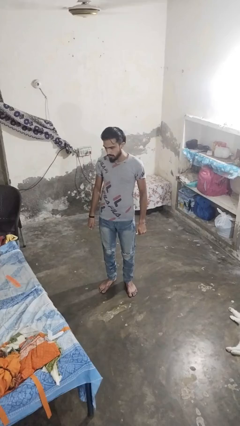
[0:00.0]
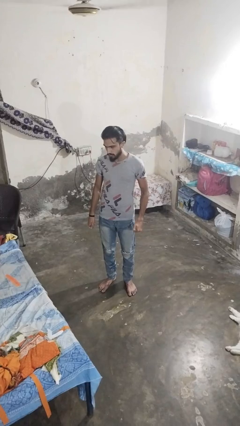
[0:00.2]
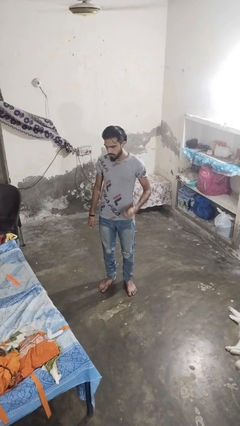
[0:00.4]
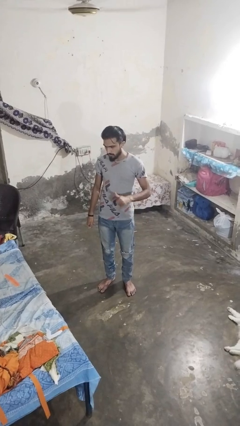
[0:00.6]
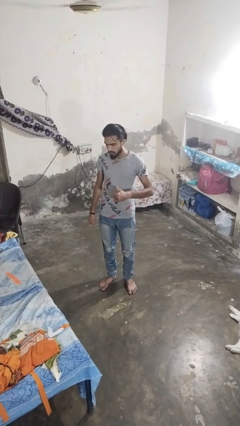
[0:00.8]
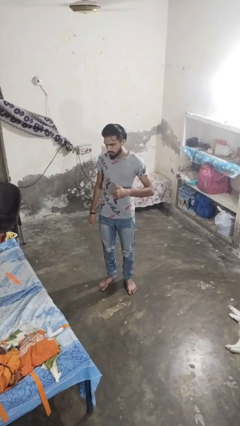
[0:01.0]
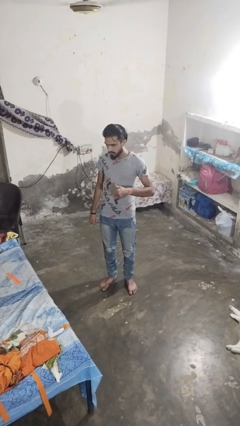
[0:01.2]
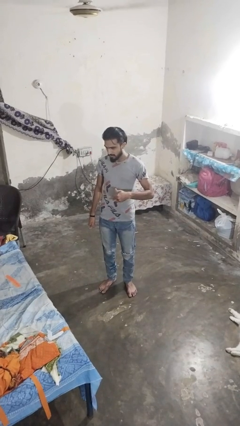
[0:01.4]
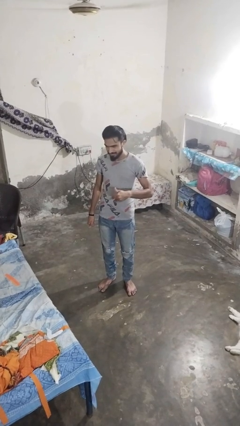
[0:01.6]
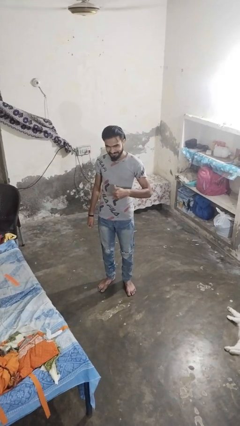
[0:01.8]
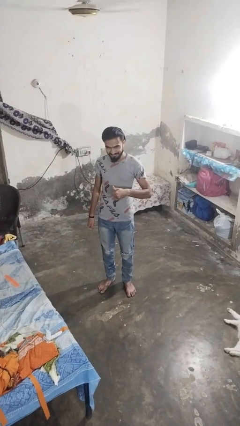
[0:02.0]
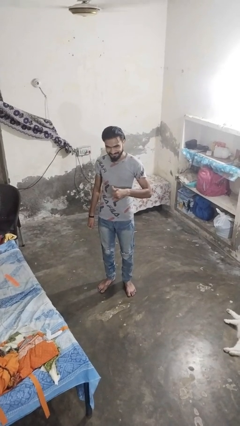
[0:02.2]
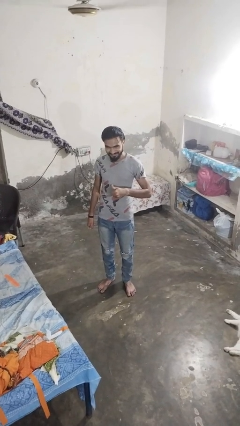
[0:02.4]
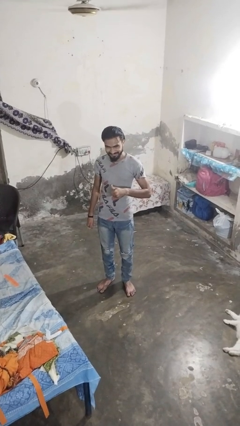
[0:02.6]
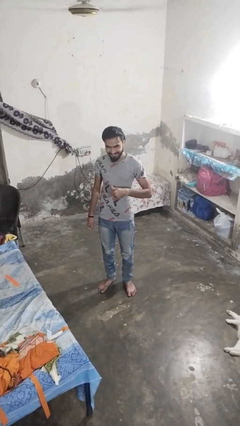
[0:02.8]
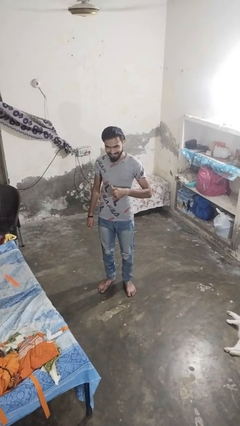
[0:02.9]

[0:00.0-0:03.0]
person gestures hang loose

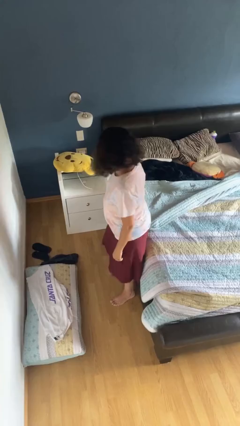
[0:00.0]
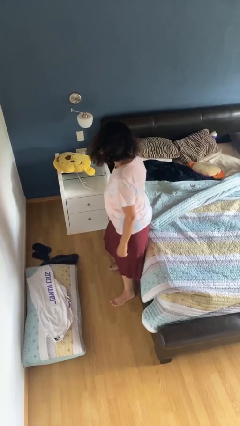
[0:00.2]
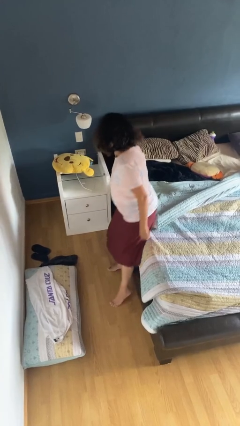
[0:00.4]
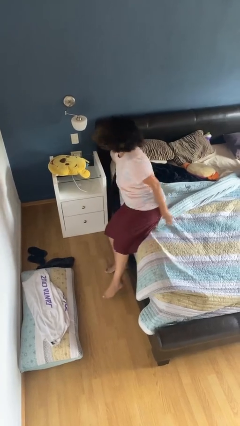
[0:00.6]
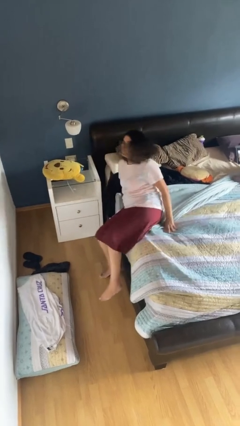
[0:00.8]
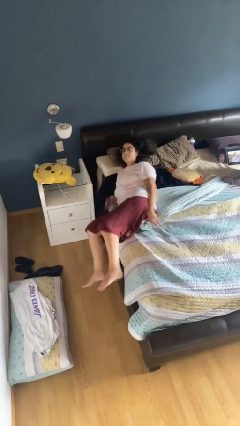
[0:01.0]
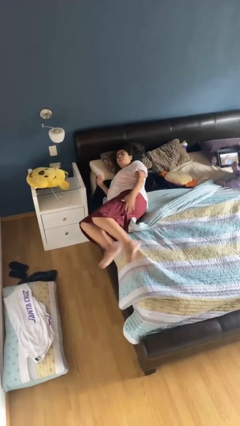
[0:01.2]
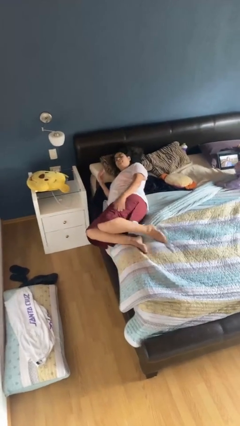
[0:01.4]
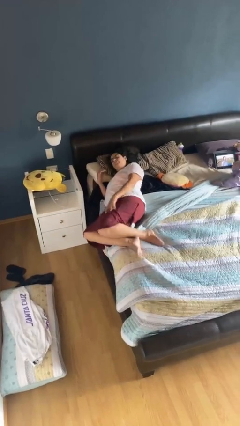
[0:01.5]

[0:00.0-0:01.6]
person lies down on bed

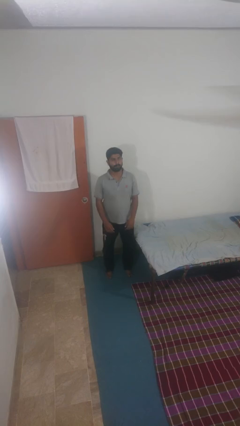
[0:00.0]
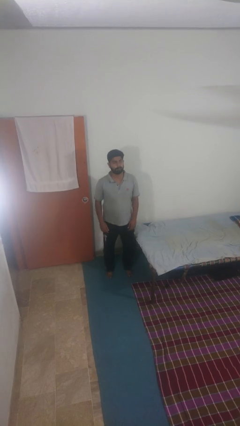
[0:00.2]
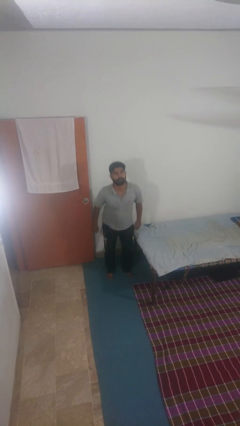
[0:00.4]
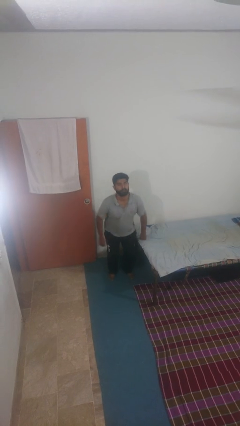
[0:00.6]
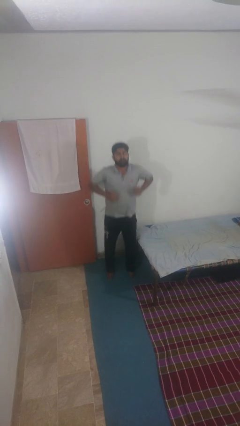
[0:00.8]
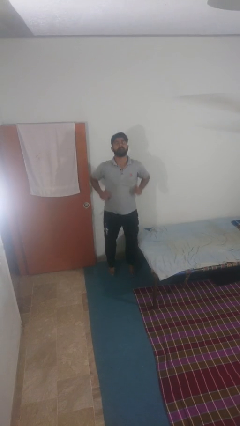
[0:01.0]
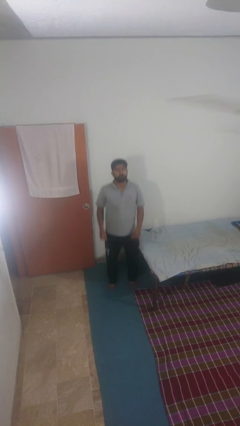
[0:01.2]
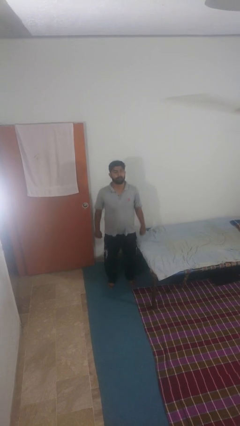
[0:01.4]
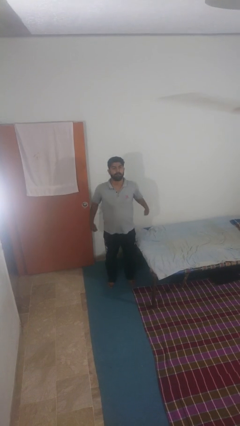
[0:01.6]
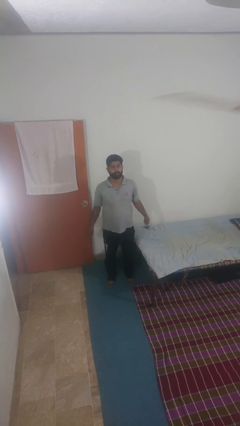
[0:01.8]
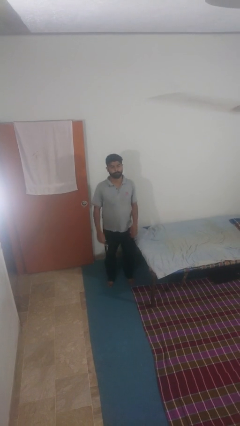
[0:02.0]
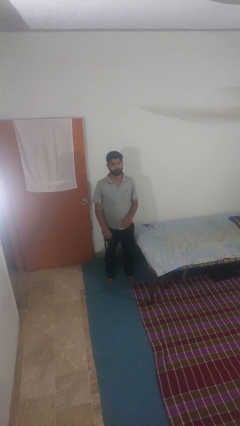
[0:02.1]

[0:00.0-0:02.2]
person jumps

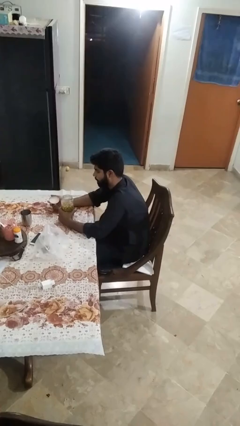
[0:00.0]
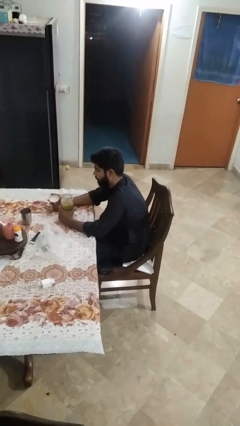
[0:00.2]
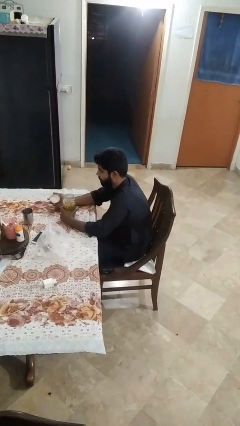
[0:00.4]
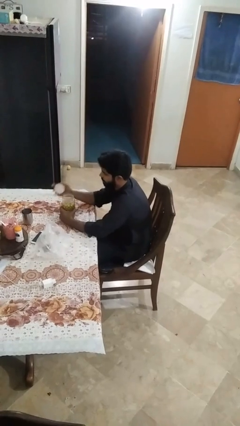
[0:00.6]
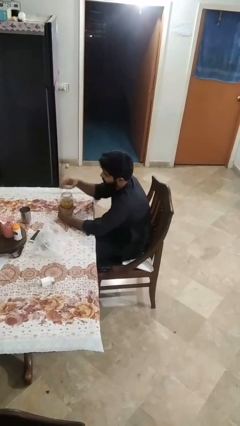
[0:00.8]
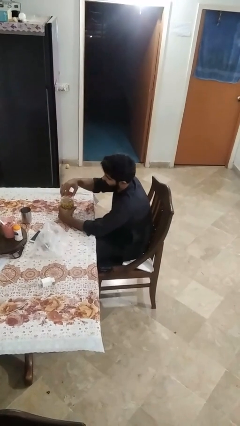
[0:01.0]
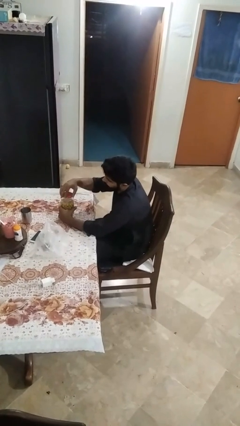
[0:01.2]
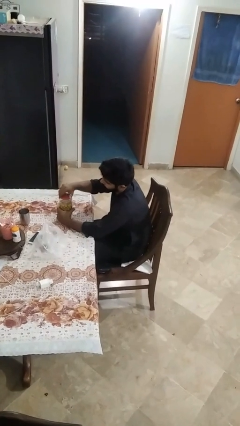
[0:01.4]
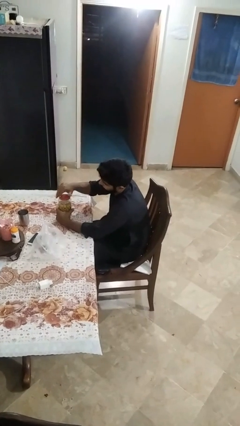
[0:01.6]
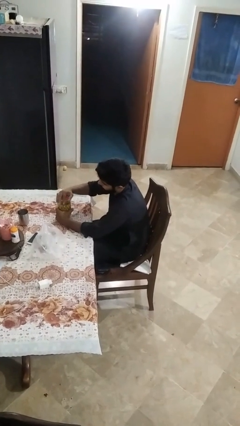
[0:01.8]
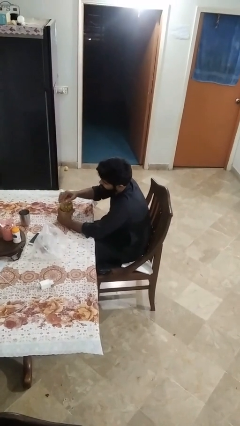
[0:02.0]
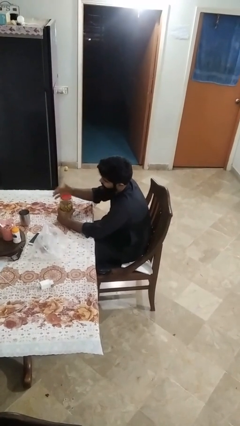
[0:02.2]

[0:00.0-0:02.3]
person closes jar

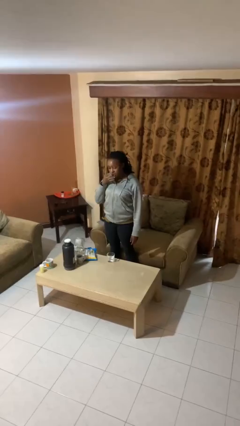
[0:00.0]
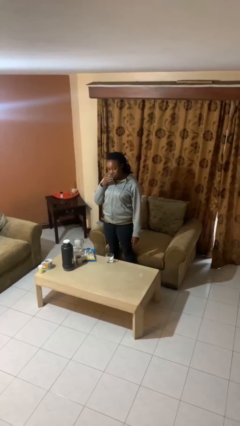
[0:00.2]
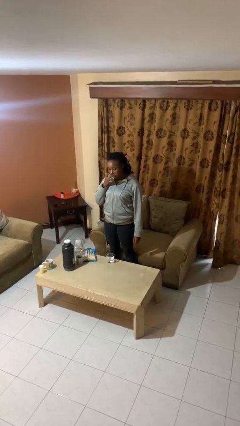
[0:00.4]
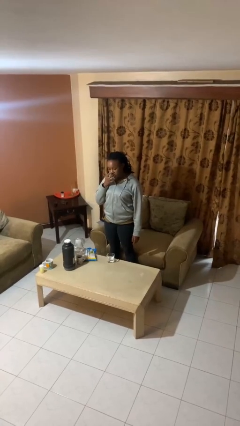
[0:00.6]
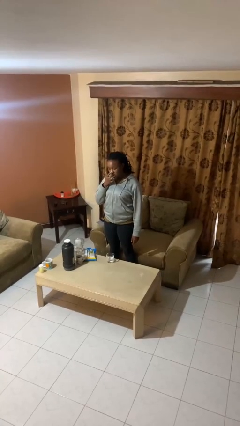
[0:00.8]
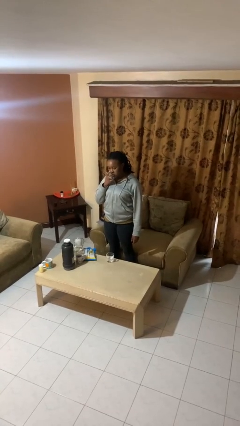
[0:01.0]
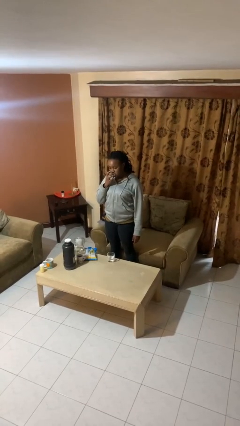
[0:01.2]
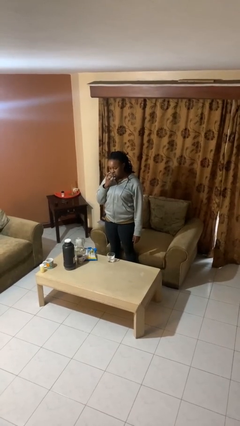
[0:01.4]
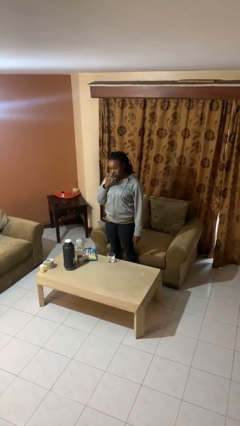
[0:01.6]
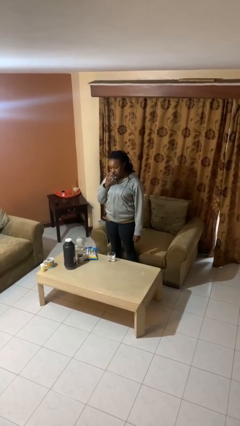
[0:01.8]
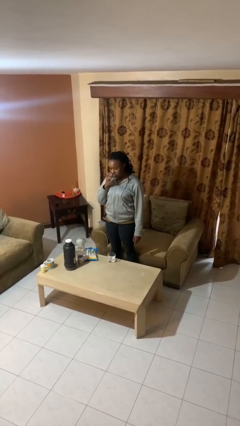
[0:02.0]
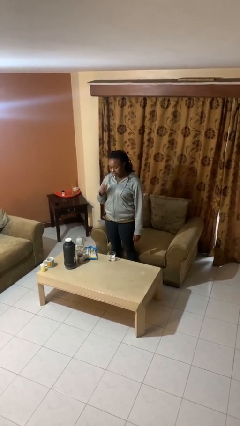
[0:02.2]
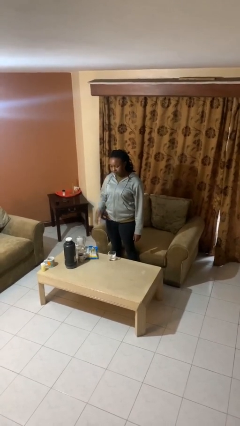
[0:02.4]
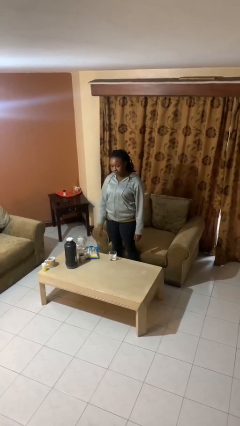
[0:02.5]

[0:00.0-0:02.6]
person licks fingers

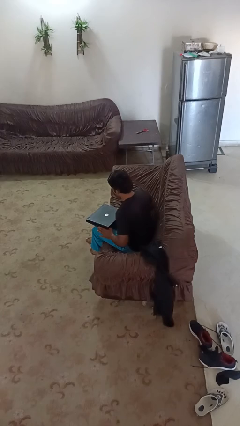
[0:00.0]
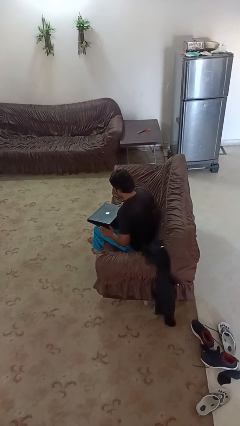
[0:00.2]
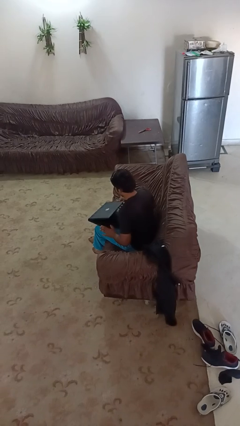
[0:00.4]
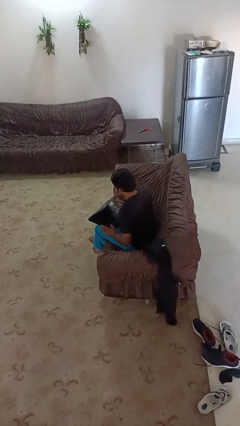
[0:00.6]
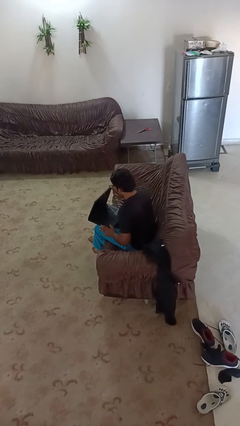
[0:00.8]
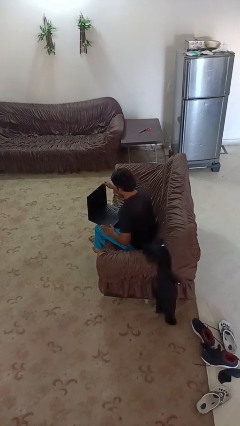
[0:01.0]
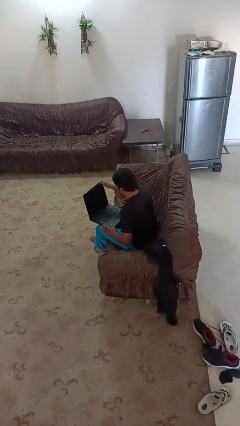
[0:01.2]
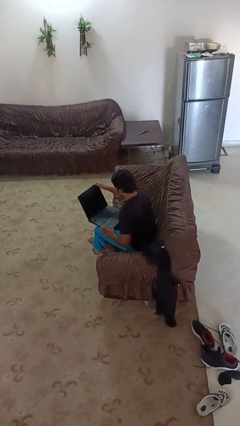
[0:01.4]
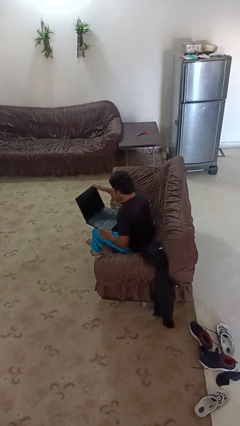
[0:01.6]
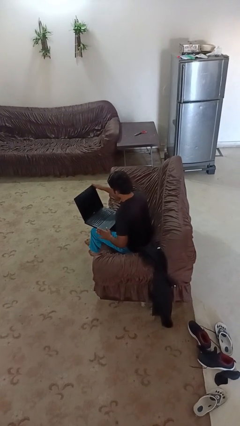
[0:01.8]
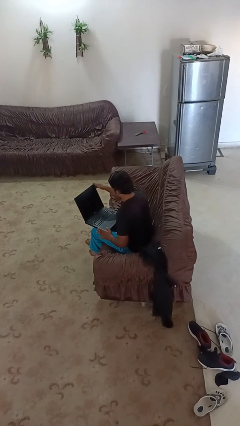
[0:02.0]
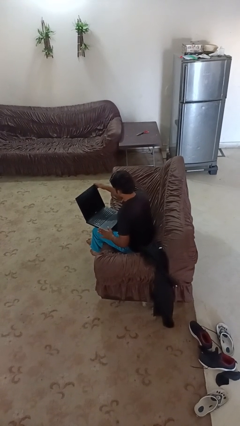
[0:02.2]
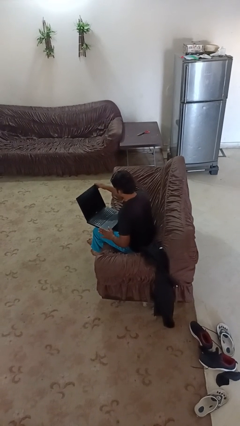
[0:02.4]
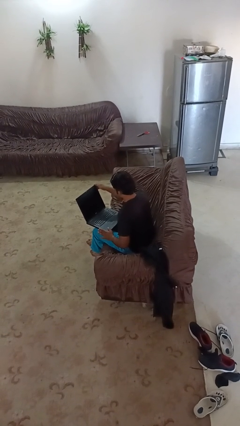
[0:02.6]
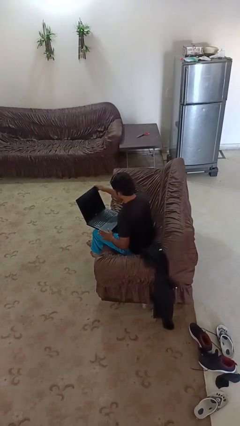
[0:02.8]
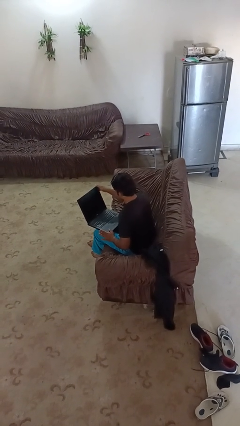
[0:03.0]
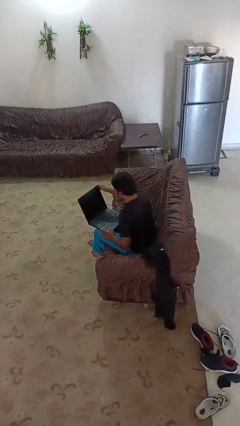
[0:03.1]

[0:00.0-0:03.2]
person opens laptop

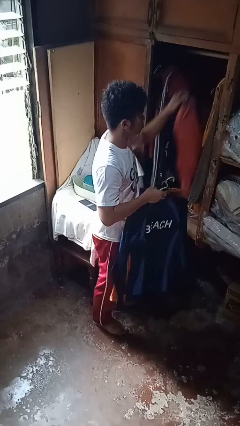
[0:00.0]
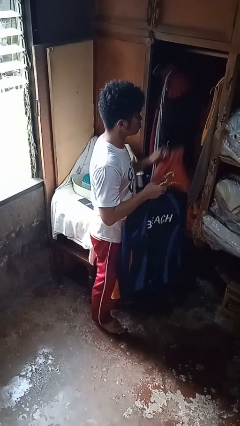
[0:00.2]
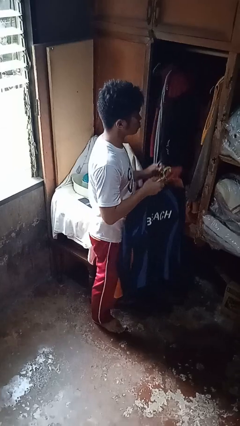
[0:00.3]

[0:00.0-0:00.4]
person takes clothes from closet

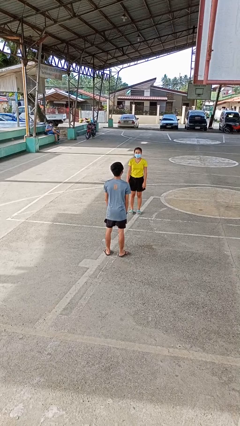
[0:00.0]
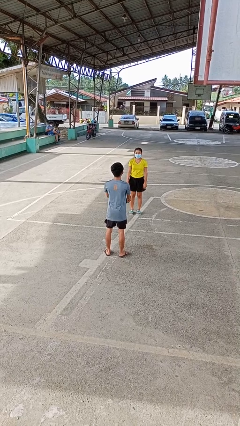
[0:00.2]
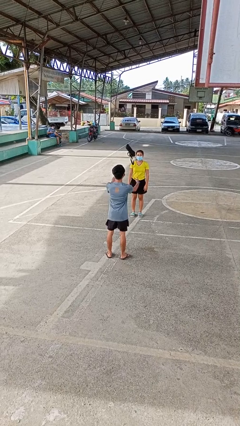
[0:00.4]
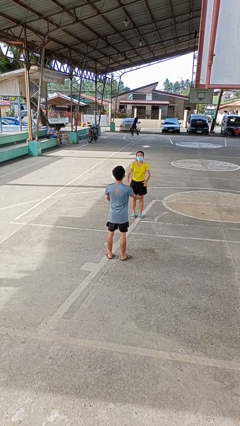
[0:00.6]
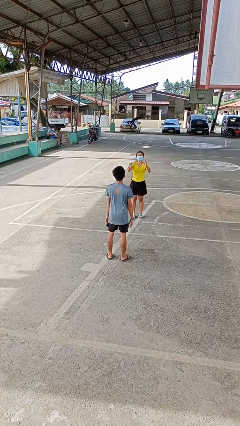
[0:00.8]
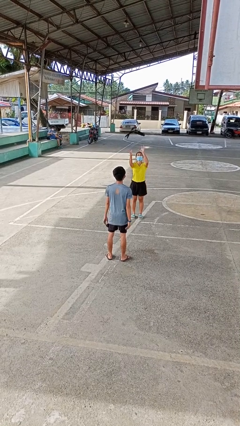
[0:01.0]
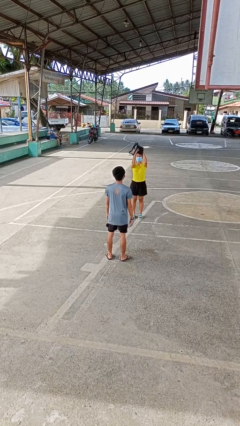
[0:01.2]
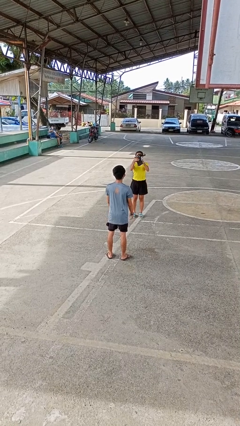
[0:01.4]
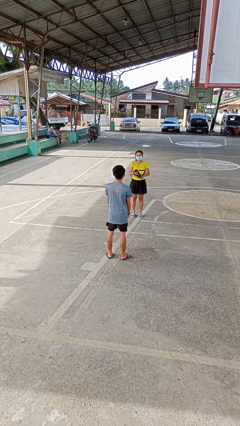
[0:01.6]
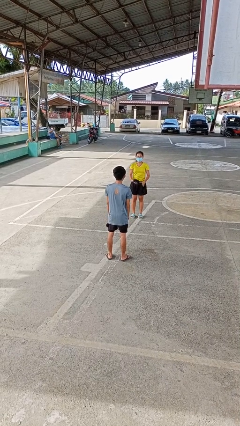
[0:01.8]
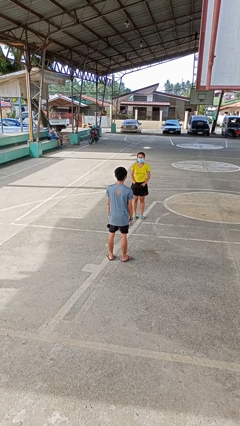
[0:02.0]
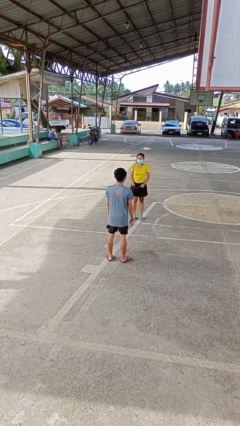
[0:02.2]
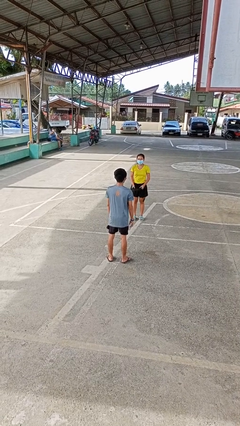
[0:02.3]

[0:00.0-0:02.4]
person throws object to person
